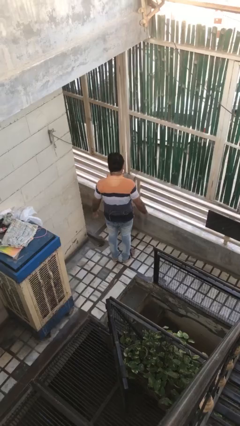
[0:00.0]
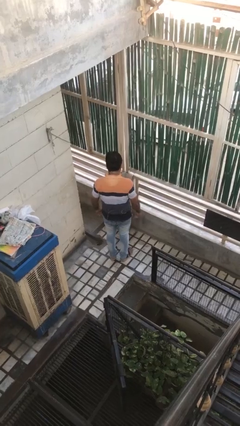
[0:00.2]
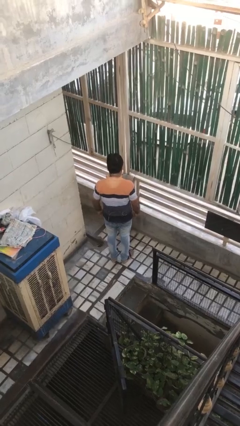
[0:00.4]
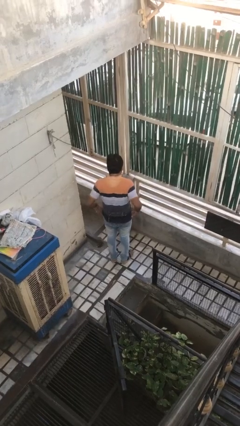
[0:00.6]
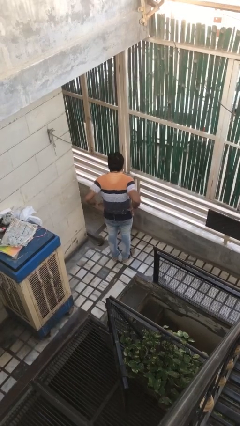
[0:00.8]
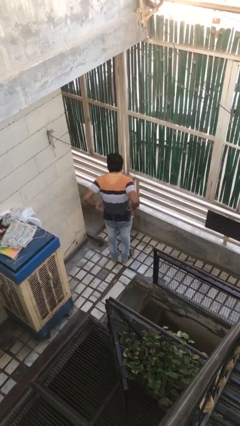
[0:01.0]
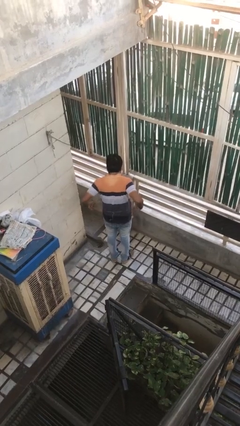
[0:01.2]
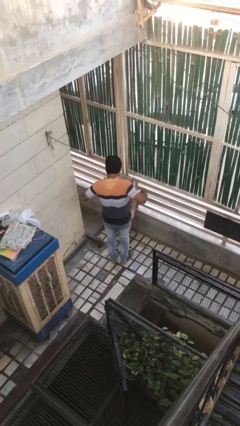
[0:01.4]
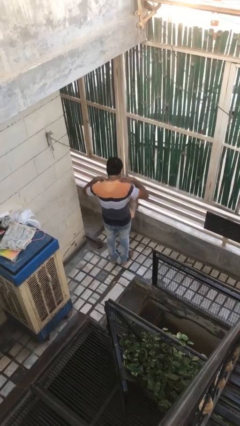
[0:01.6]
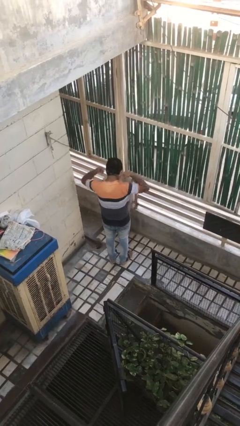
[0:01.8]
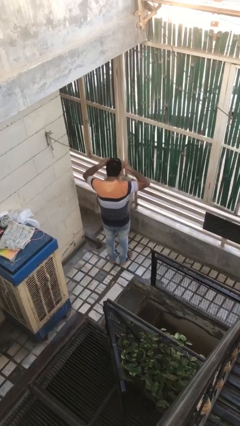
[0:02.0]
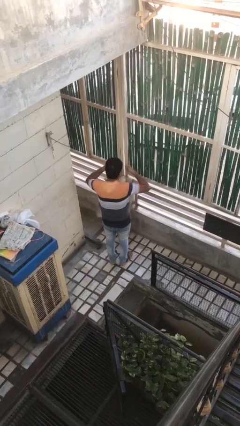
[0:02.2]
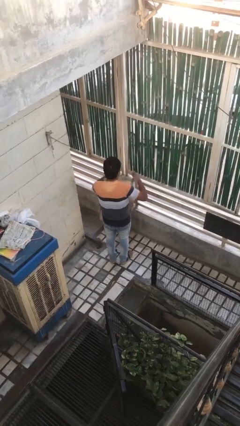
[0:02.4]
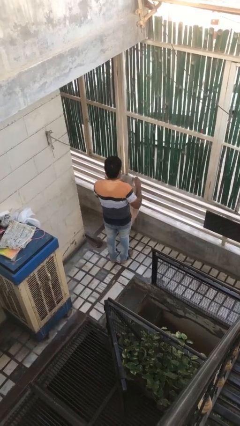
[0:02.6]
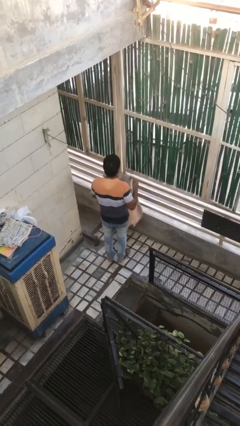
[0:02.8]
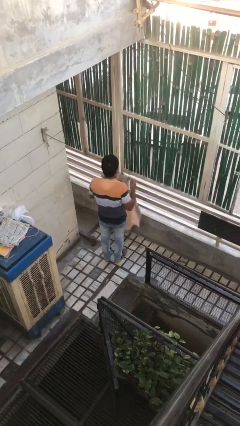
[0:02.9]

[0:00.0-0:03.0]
person takes off apron

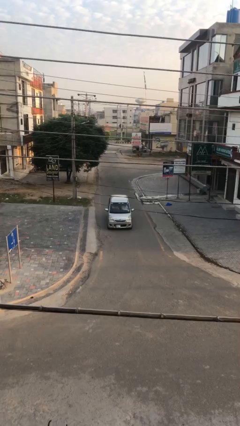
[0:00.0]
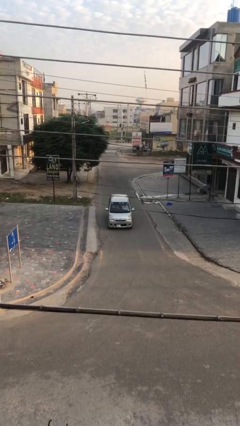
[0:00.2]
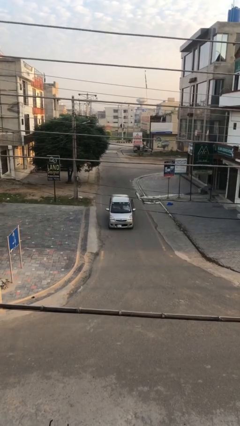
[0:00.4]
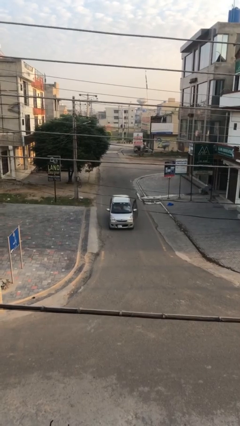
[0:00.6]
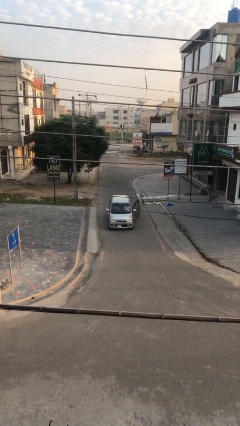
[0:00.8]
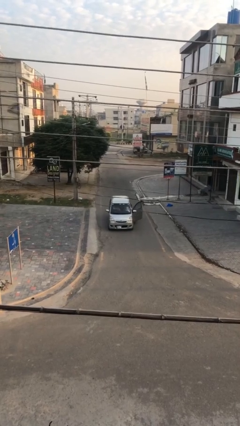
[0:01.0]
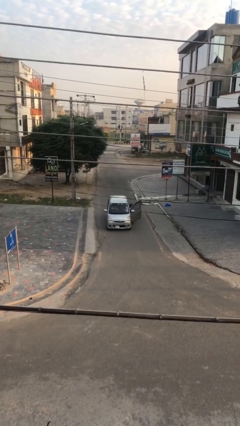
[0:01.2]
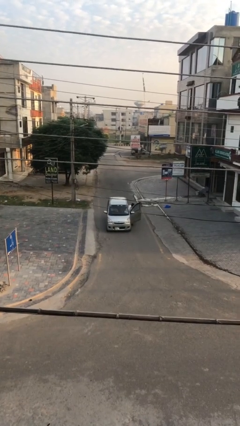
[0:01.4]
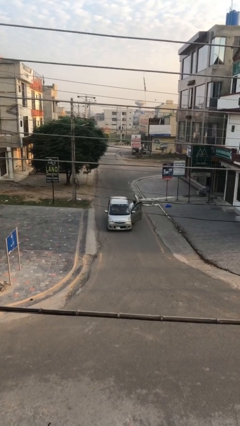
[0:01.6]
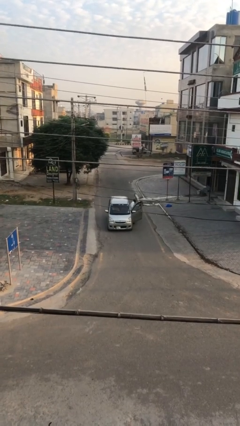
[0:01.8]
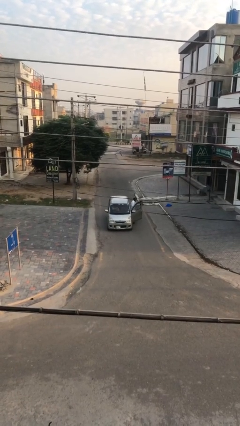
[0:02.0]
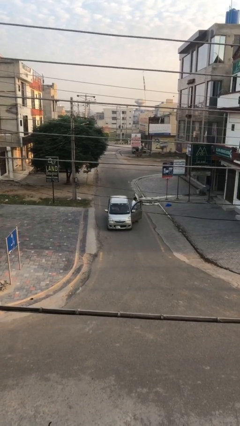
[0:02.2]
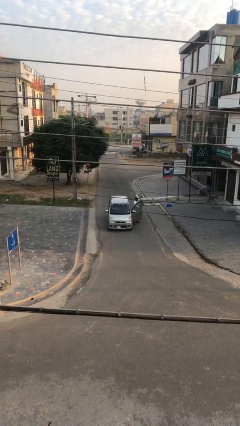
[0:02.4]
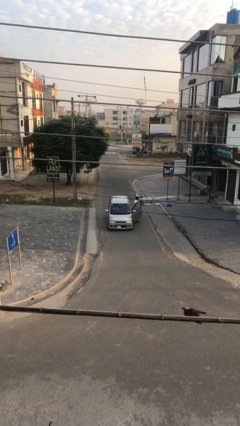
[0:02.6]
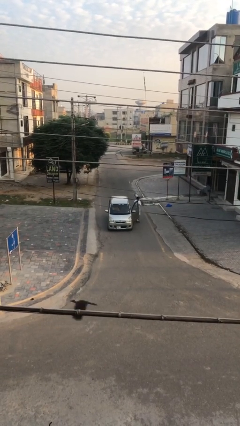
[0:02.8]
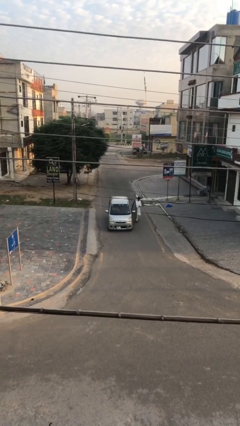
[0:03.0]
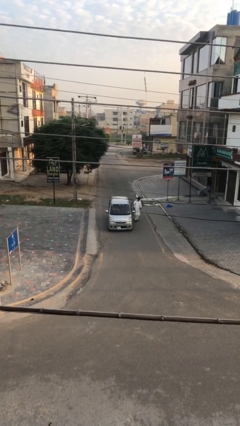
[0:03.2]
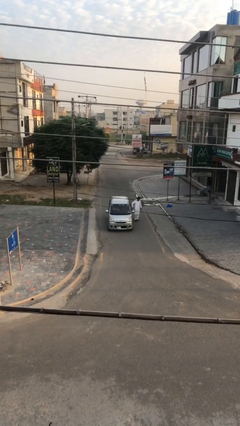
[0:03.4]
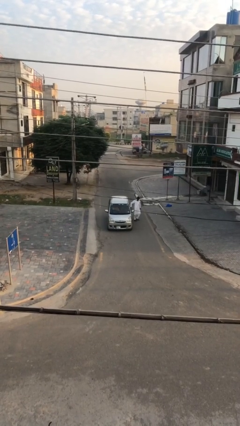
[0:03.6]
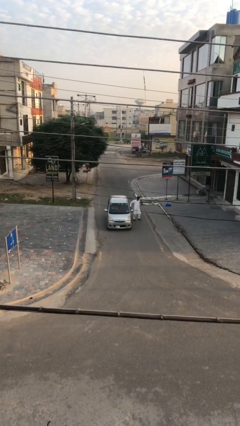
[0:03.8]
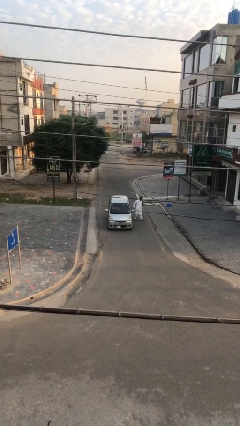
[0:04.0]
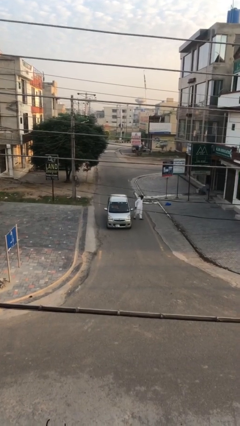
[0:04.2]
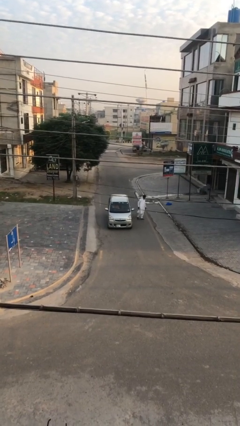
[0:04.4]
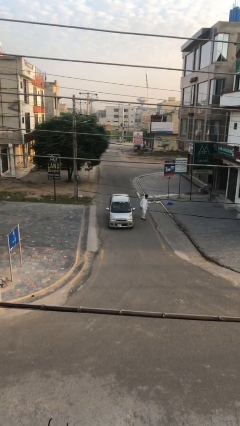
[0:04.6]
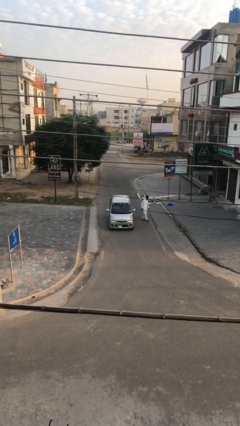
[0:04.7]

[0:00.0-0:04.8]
car drops off person

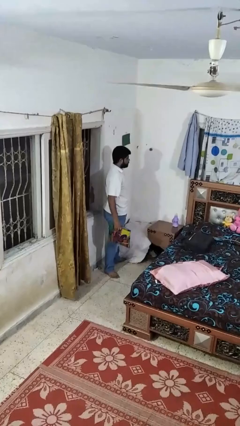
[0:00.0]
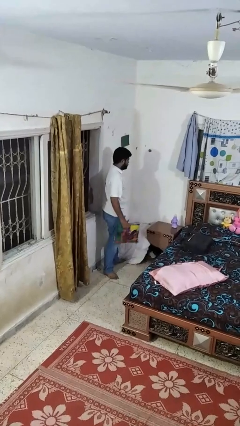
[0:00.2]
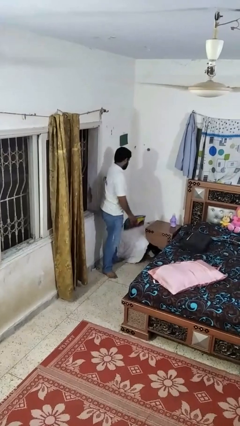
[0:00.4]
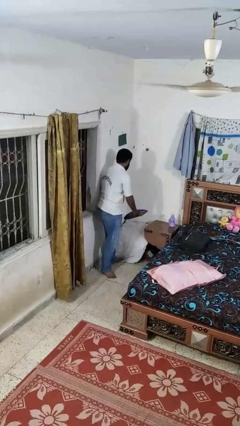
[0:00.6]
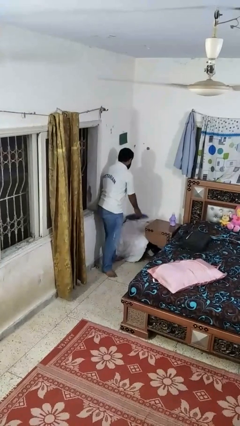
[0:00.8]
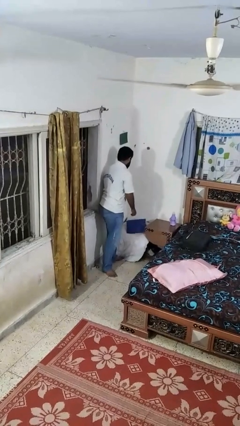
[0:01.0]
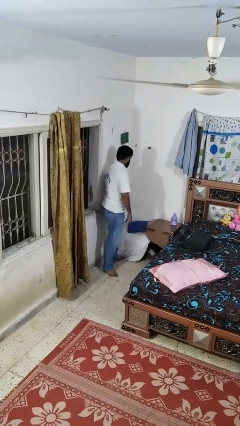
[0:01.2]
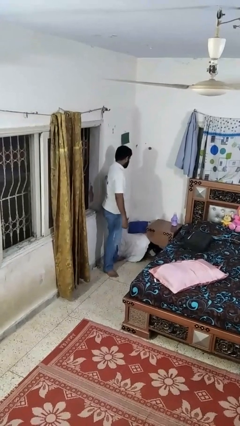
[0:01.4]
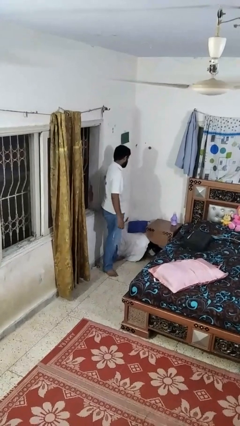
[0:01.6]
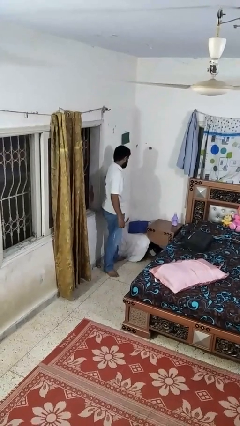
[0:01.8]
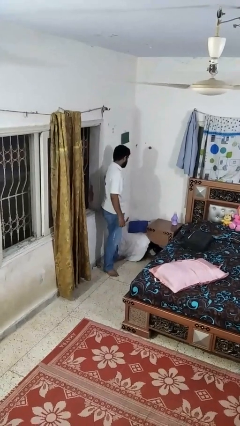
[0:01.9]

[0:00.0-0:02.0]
person puts down object on couch

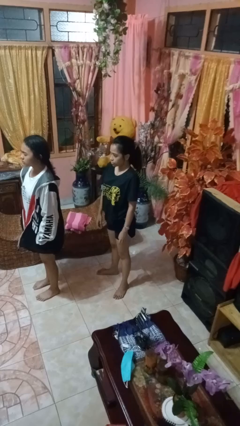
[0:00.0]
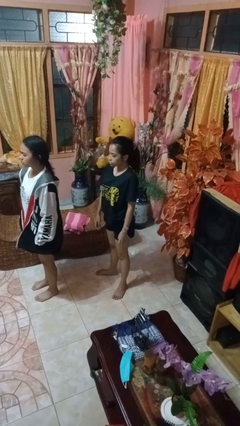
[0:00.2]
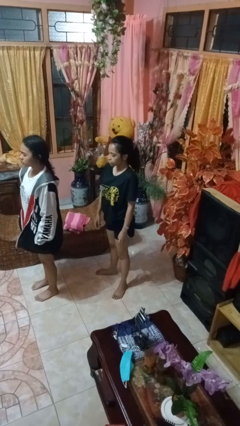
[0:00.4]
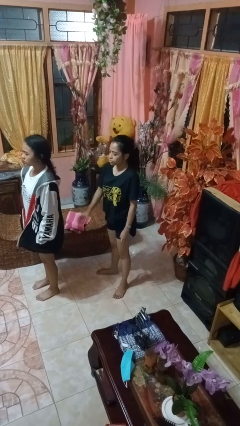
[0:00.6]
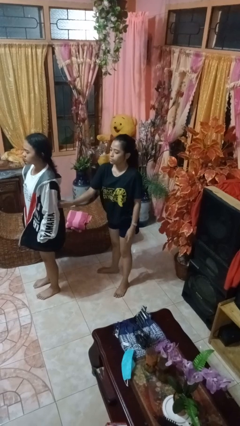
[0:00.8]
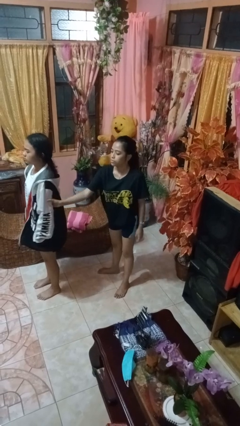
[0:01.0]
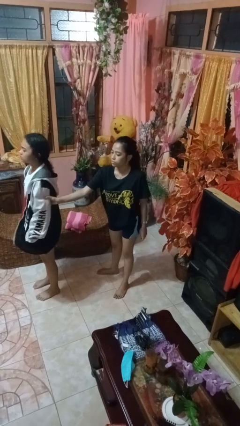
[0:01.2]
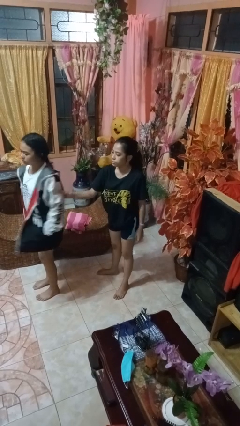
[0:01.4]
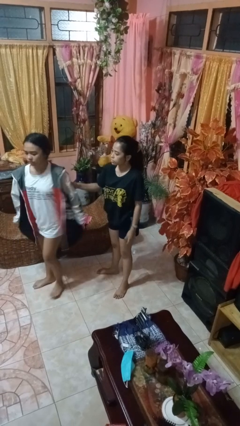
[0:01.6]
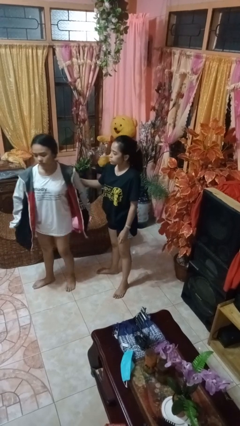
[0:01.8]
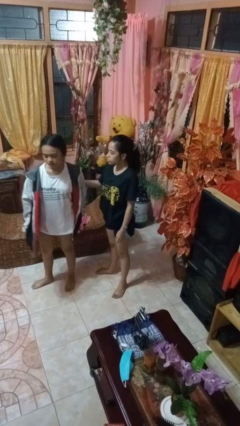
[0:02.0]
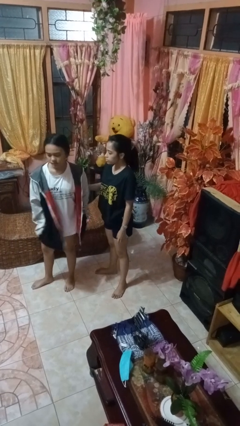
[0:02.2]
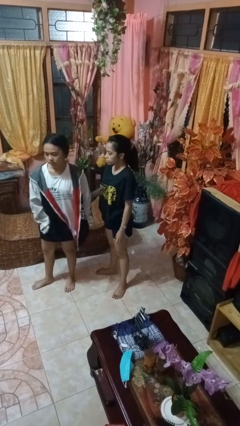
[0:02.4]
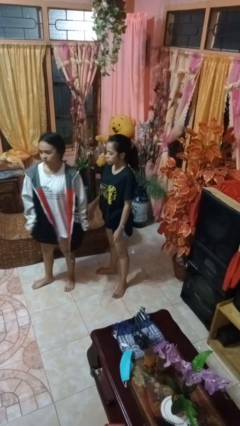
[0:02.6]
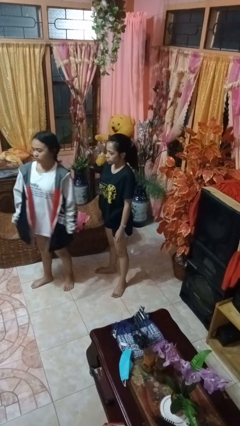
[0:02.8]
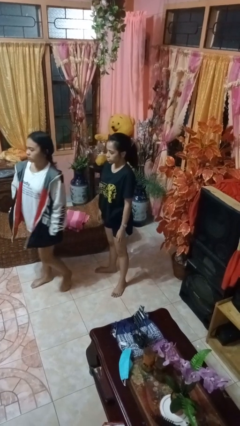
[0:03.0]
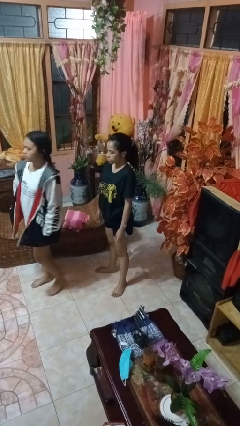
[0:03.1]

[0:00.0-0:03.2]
person grabs person by bicep

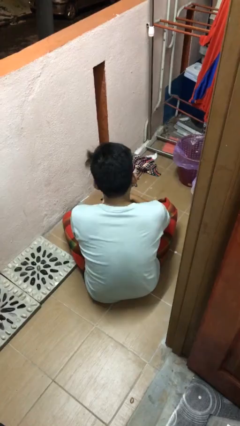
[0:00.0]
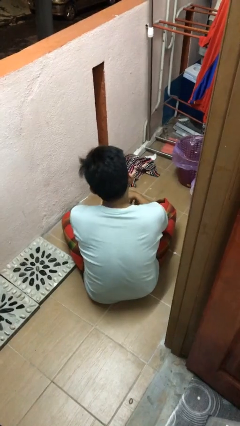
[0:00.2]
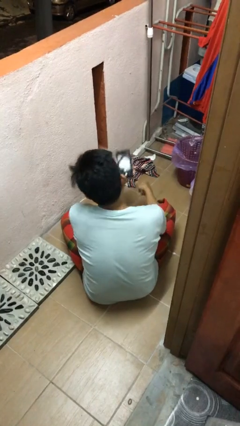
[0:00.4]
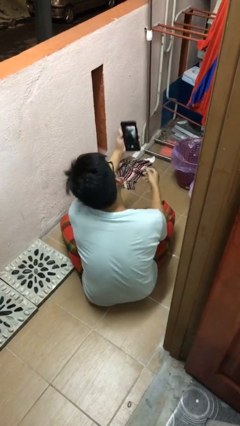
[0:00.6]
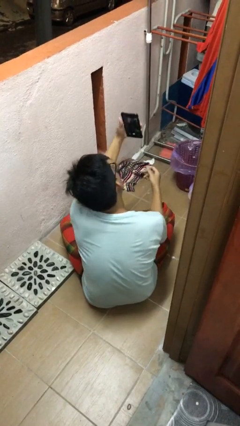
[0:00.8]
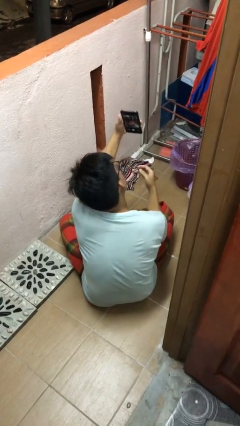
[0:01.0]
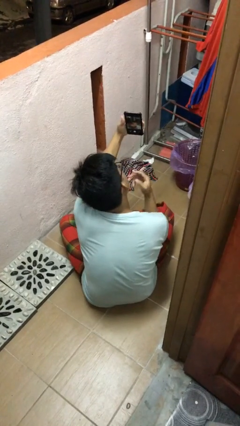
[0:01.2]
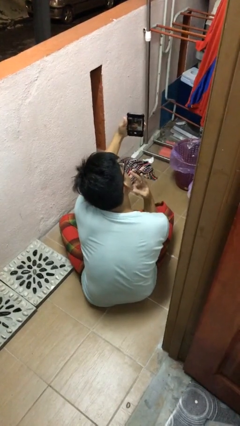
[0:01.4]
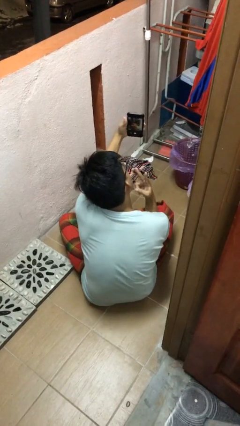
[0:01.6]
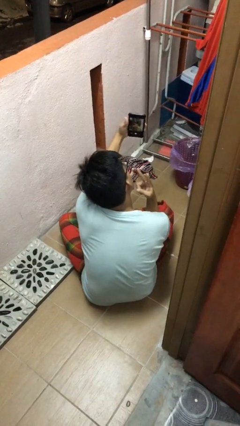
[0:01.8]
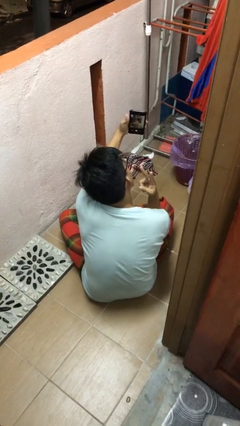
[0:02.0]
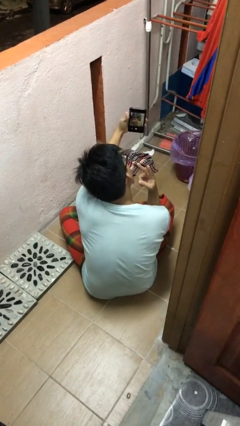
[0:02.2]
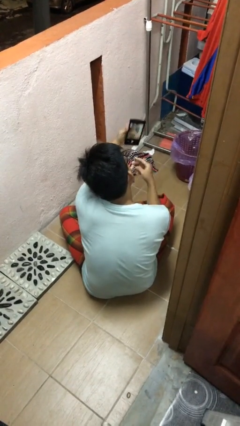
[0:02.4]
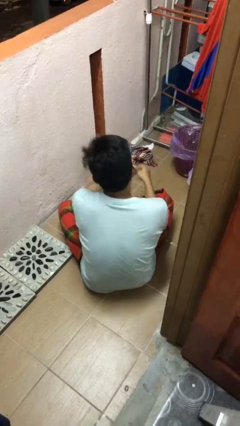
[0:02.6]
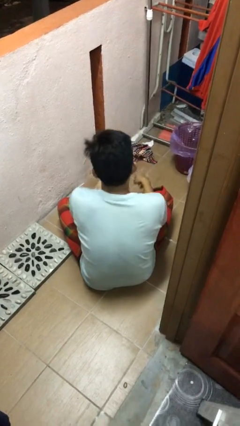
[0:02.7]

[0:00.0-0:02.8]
person takes selfie

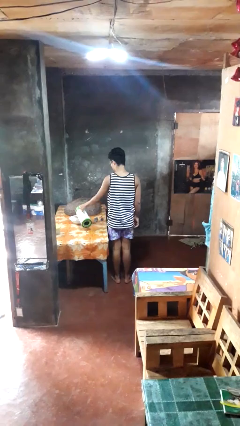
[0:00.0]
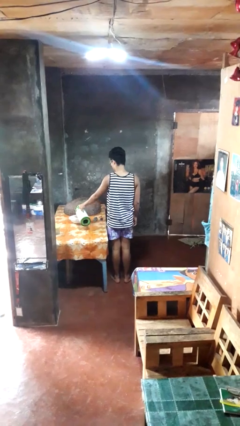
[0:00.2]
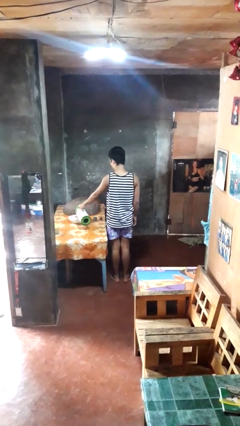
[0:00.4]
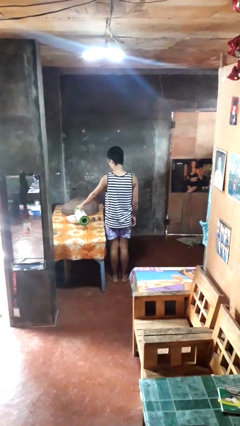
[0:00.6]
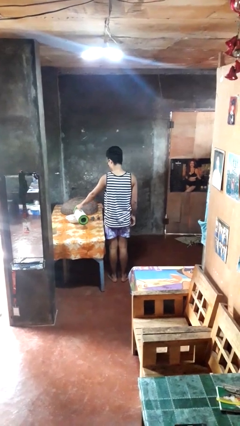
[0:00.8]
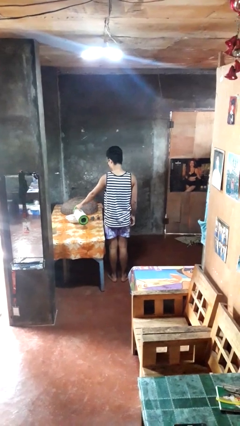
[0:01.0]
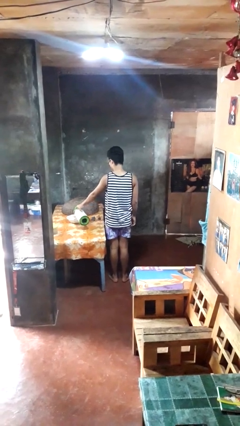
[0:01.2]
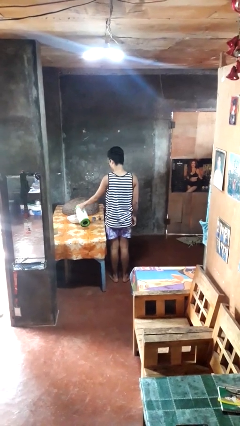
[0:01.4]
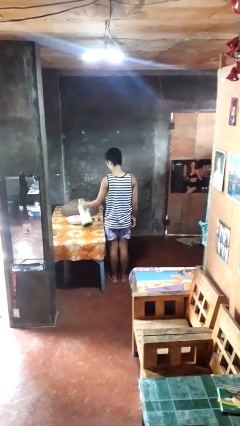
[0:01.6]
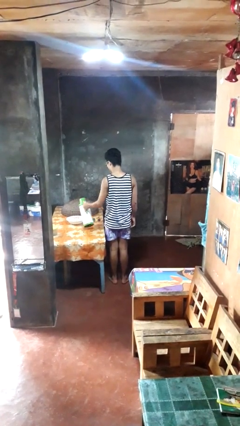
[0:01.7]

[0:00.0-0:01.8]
person pours into bowl
